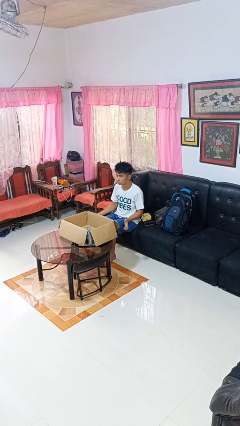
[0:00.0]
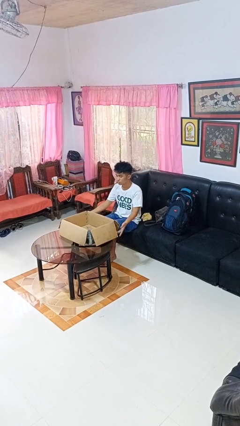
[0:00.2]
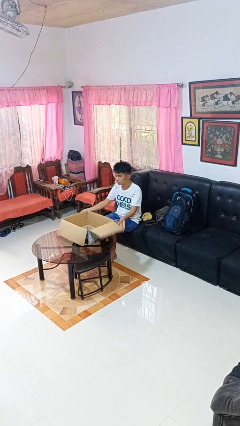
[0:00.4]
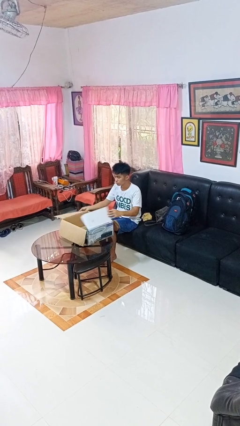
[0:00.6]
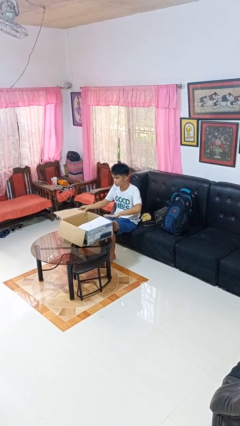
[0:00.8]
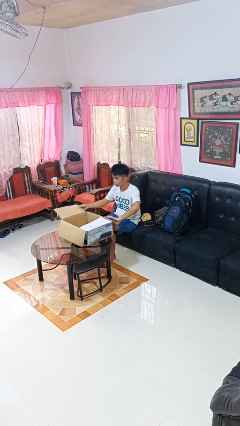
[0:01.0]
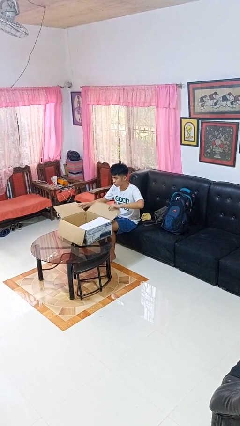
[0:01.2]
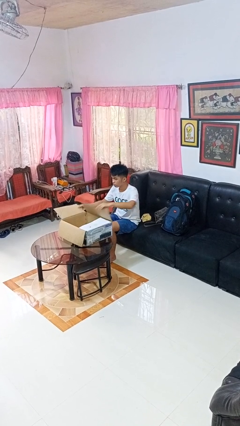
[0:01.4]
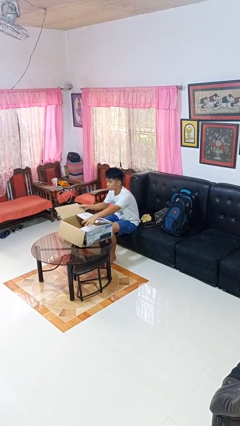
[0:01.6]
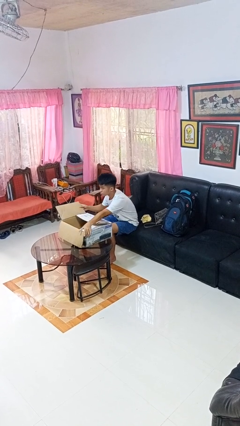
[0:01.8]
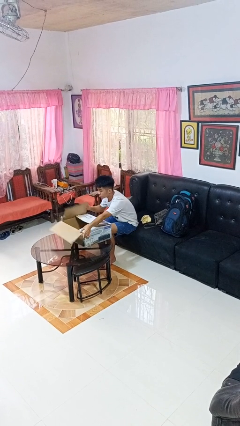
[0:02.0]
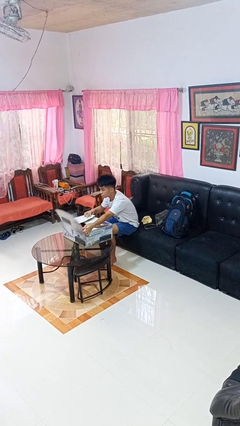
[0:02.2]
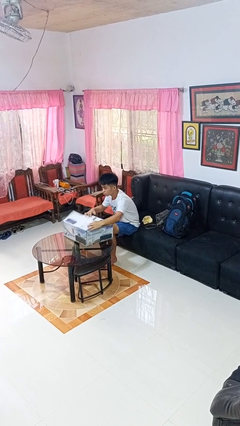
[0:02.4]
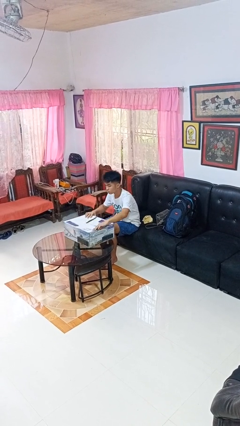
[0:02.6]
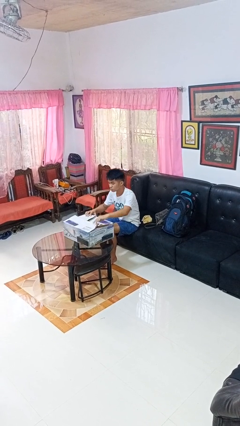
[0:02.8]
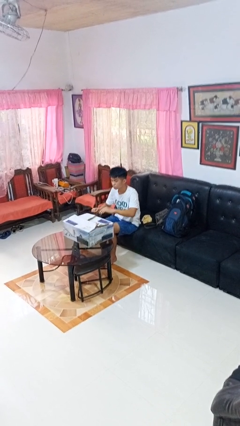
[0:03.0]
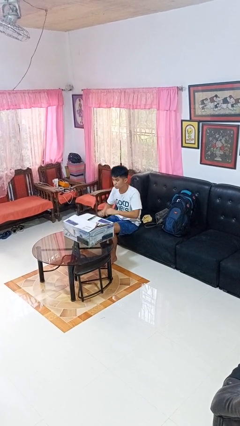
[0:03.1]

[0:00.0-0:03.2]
person closes box

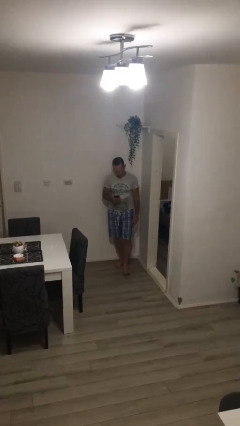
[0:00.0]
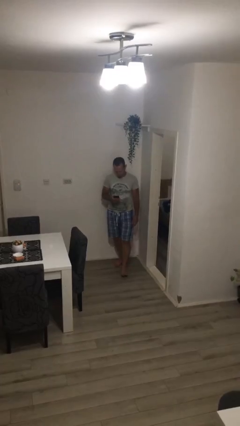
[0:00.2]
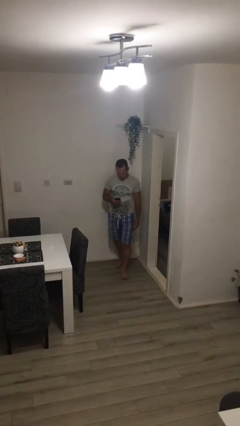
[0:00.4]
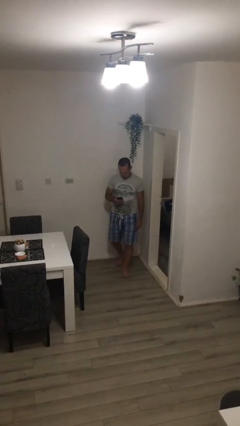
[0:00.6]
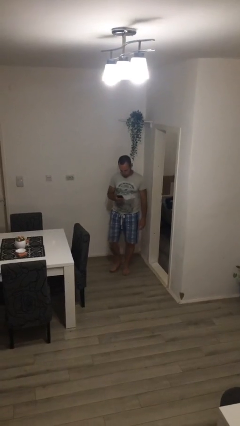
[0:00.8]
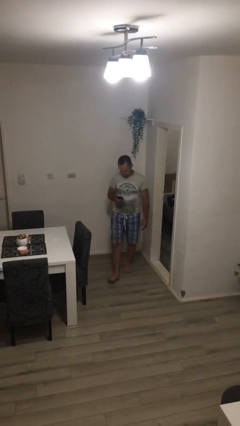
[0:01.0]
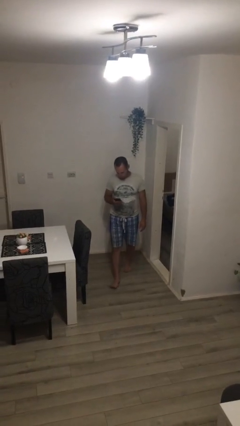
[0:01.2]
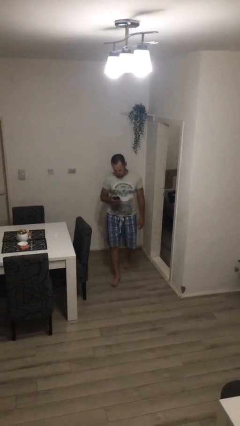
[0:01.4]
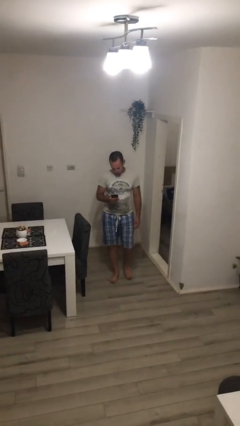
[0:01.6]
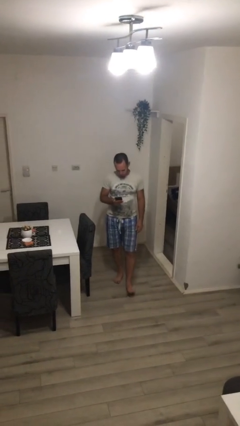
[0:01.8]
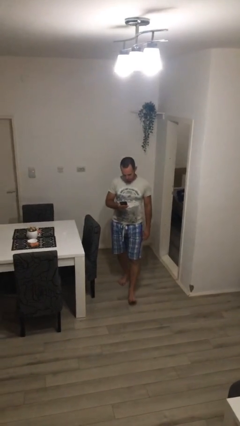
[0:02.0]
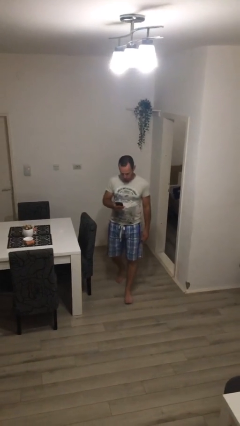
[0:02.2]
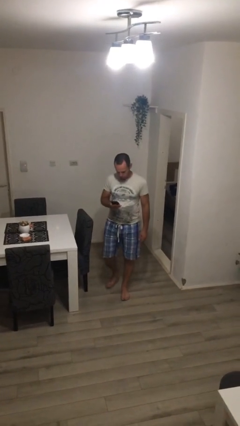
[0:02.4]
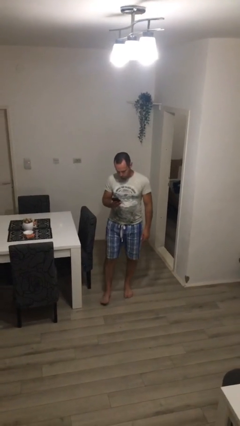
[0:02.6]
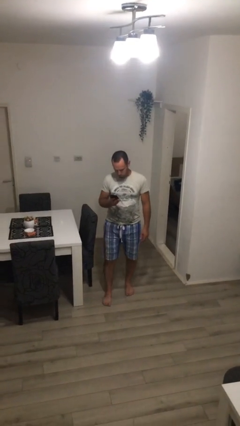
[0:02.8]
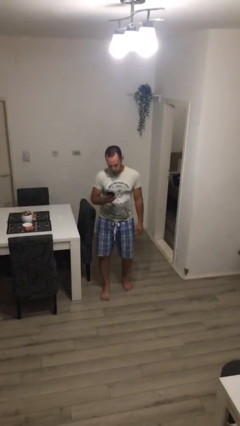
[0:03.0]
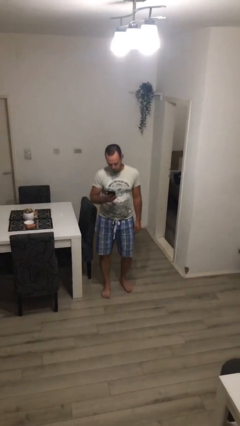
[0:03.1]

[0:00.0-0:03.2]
person texts on phone

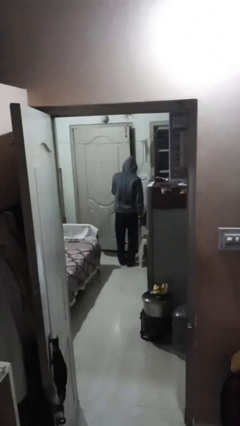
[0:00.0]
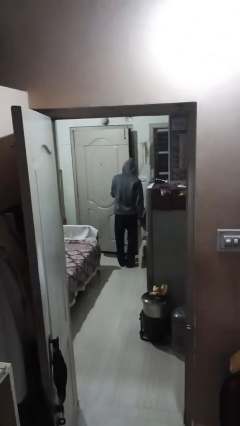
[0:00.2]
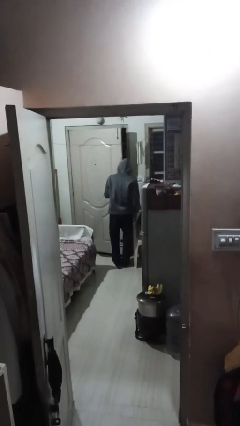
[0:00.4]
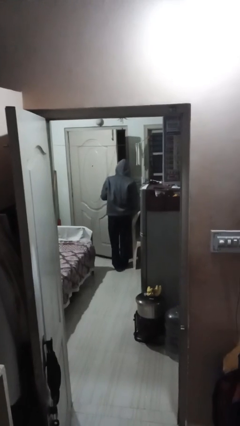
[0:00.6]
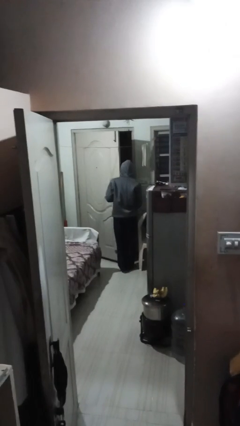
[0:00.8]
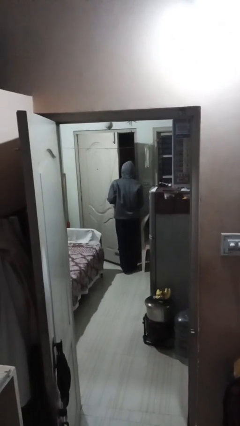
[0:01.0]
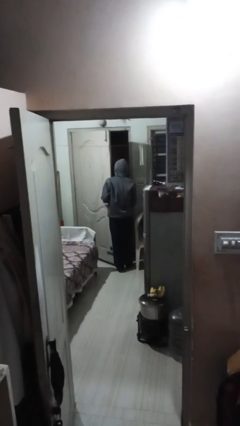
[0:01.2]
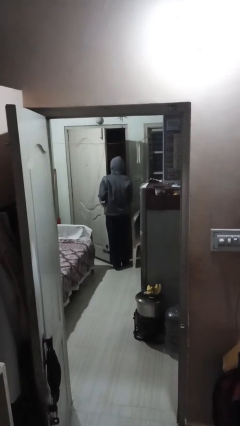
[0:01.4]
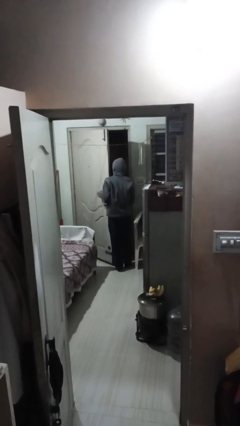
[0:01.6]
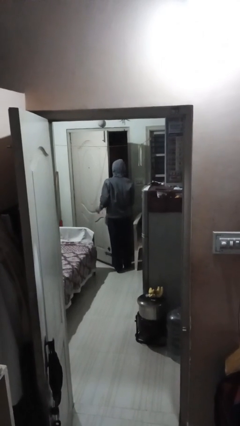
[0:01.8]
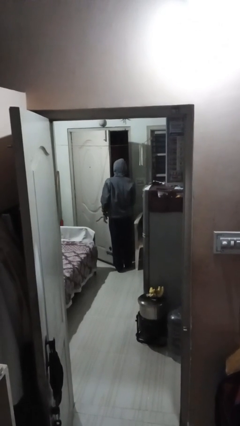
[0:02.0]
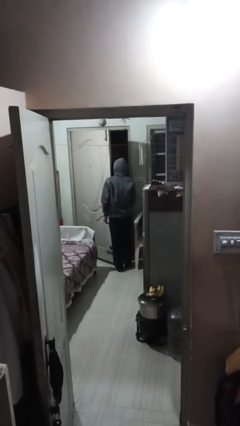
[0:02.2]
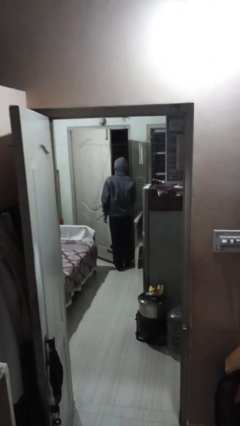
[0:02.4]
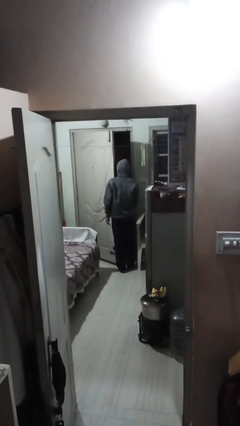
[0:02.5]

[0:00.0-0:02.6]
person opens facility door

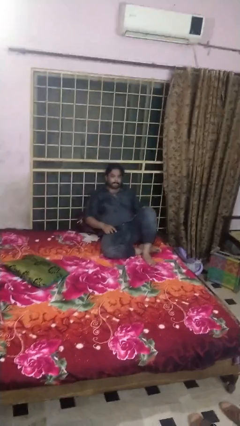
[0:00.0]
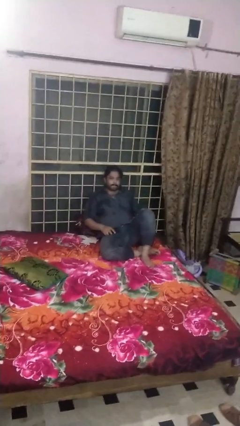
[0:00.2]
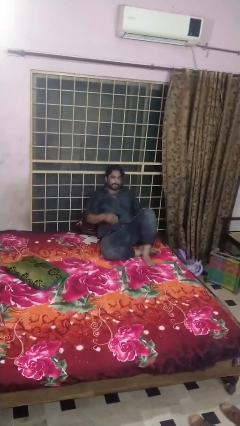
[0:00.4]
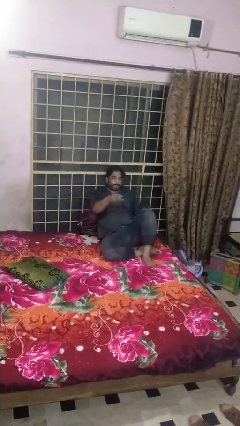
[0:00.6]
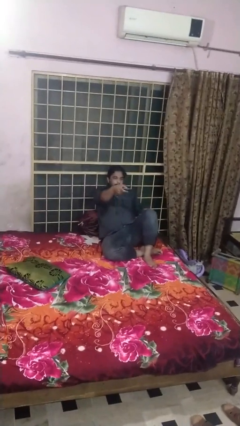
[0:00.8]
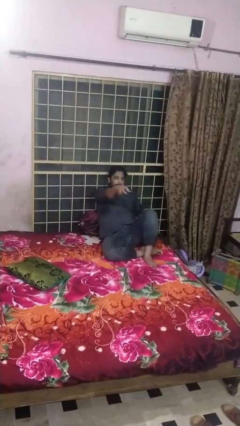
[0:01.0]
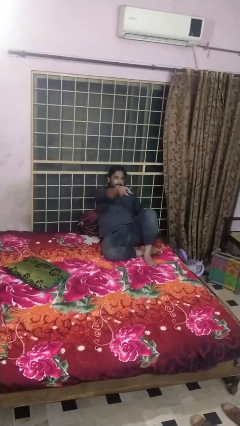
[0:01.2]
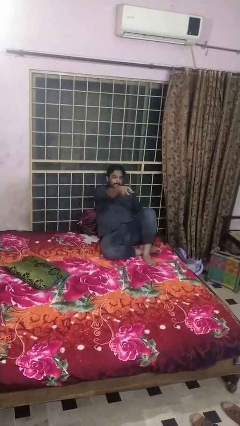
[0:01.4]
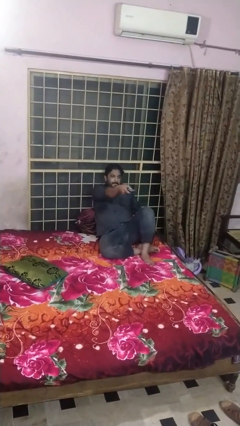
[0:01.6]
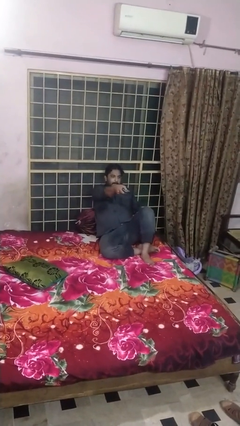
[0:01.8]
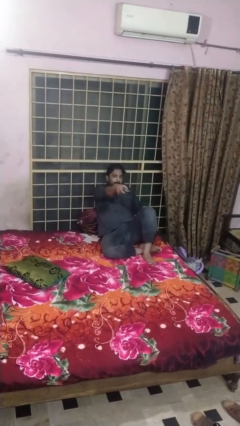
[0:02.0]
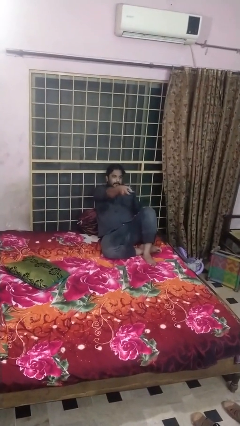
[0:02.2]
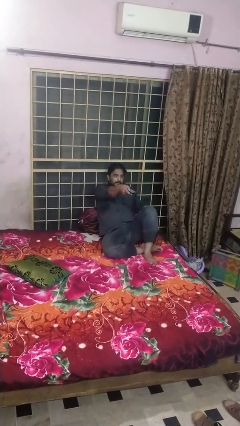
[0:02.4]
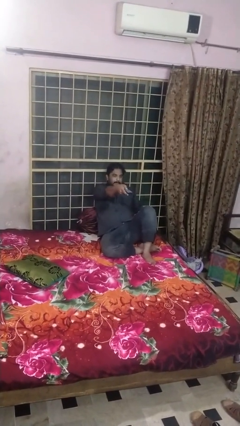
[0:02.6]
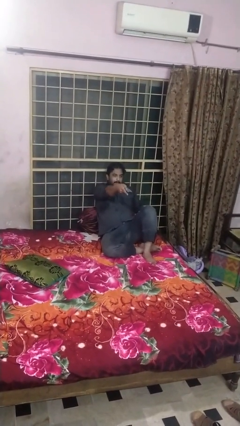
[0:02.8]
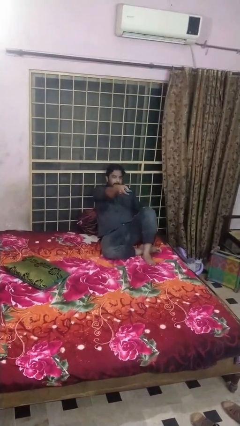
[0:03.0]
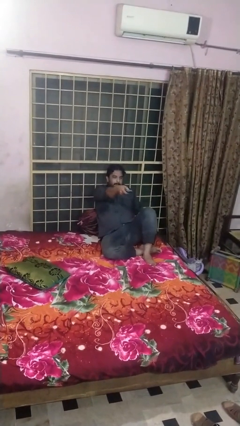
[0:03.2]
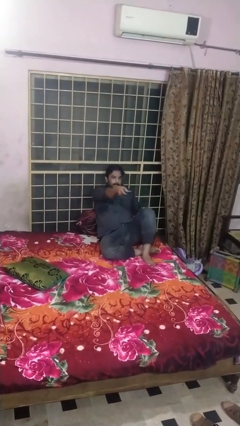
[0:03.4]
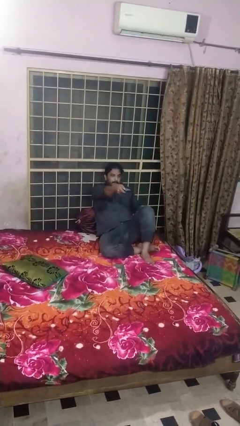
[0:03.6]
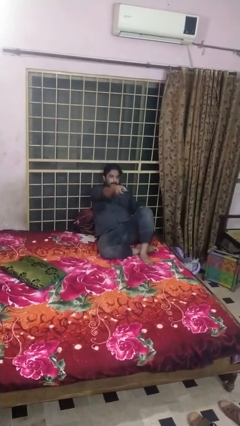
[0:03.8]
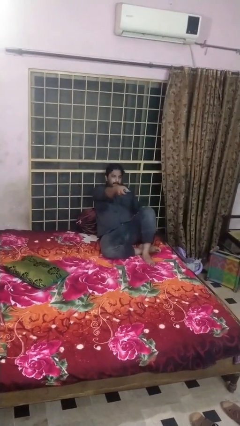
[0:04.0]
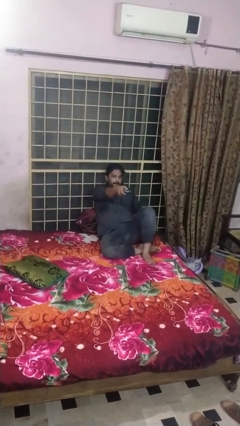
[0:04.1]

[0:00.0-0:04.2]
person uses television remote

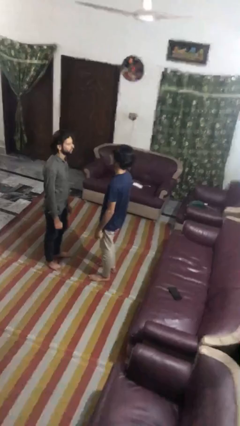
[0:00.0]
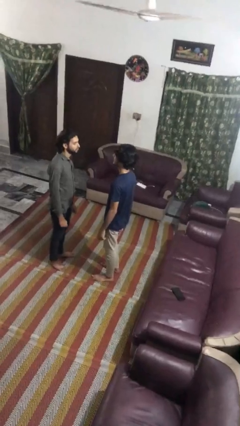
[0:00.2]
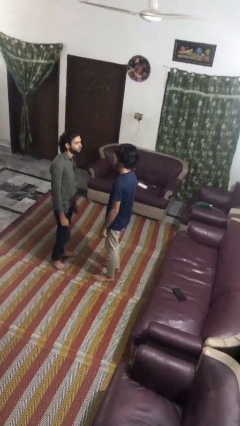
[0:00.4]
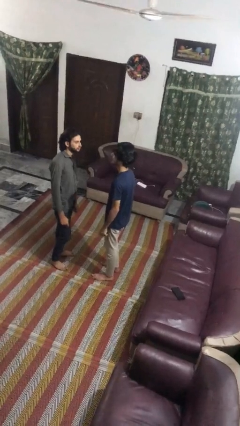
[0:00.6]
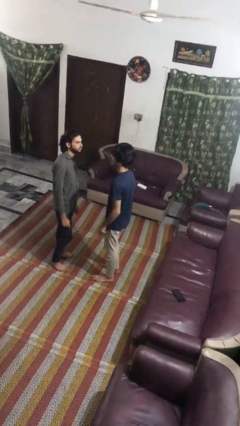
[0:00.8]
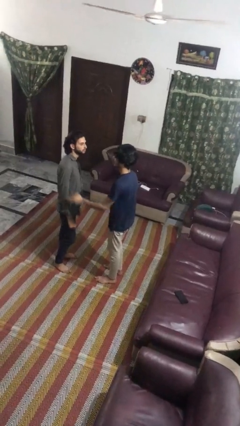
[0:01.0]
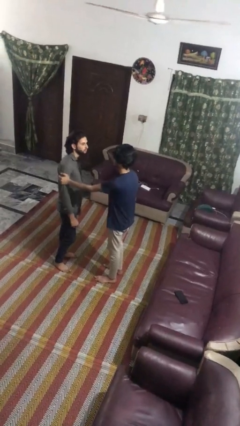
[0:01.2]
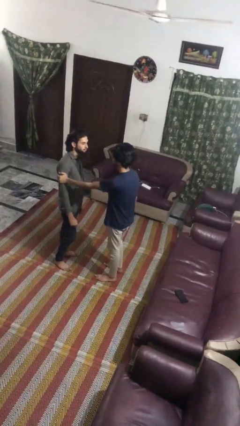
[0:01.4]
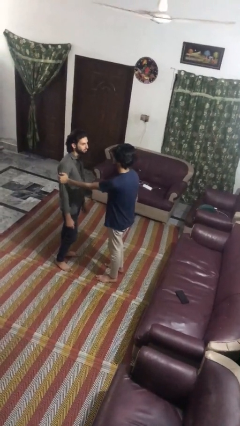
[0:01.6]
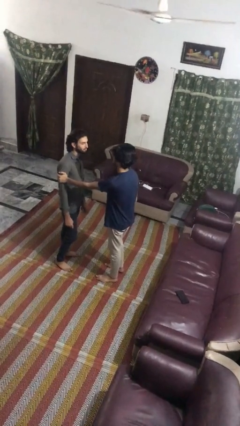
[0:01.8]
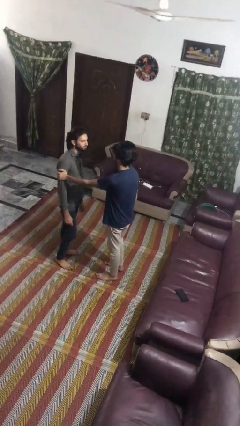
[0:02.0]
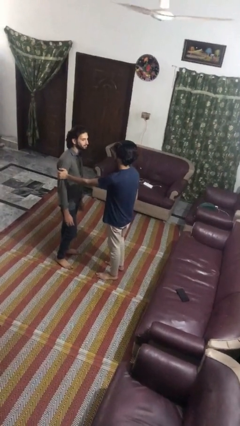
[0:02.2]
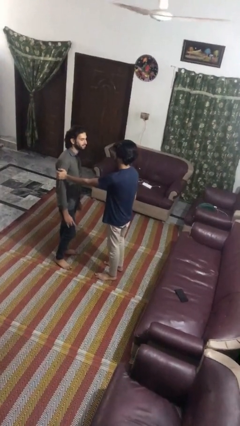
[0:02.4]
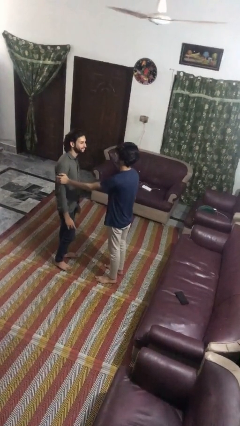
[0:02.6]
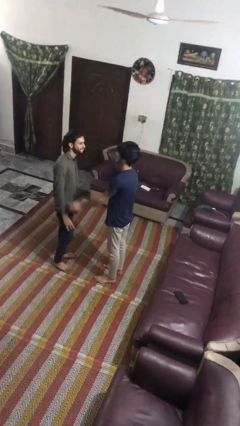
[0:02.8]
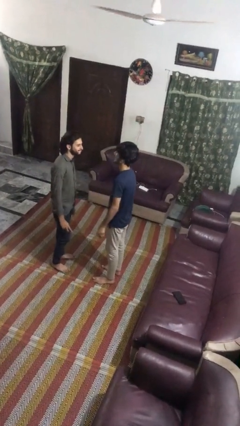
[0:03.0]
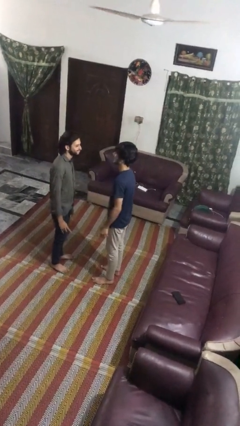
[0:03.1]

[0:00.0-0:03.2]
person grabs person by bicep

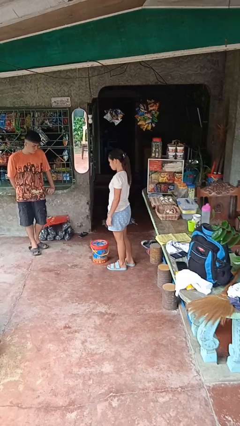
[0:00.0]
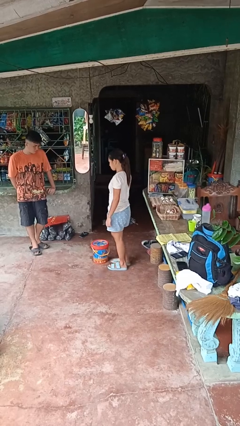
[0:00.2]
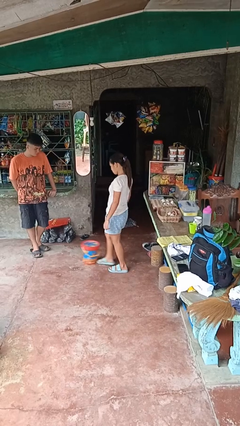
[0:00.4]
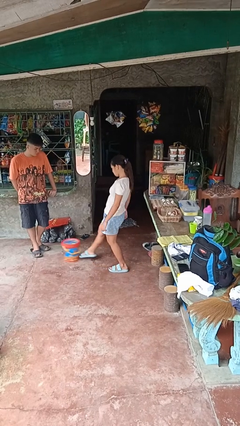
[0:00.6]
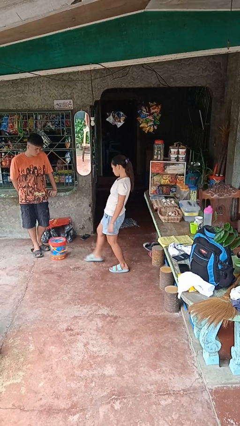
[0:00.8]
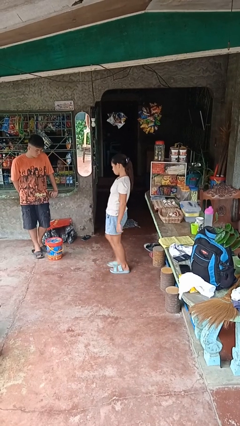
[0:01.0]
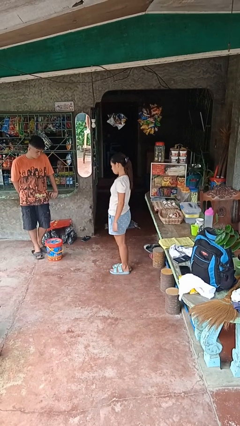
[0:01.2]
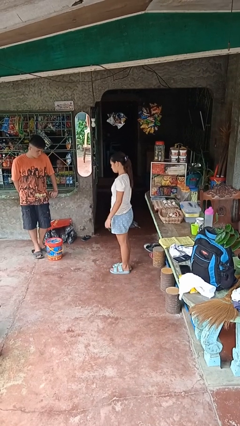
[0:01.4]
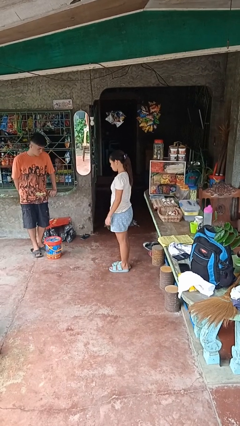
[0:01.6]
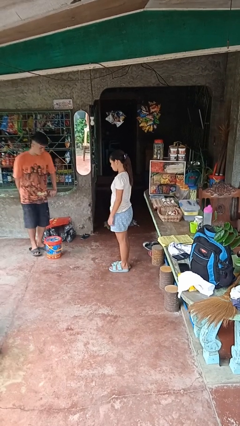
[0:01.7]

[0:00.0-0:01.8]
person kicks object to person
